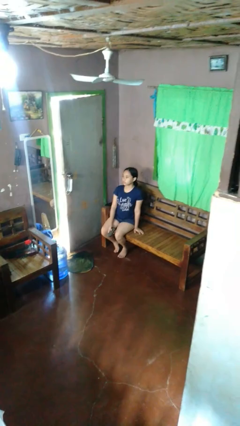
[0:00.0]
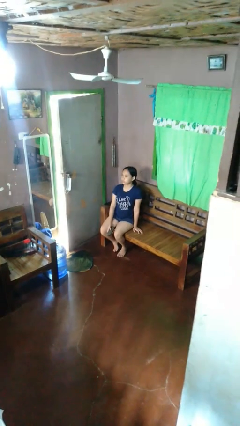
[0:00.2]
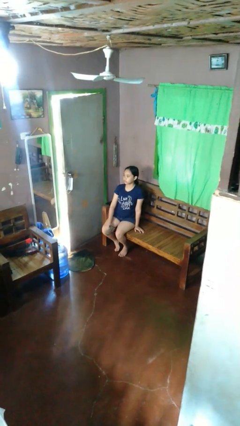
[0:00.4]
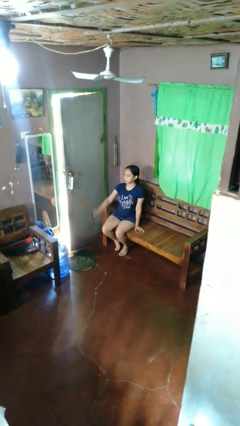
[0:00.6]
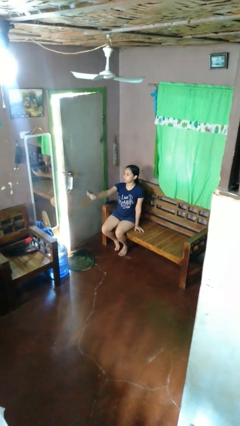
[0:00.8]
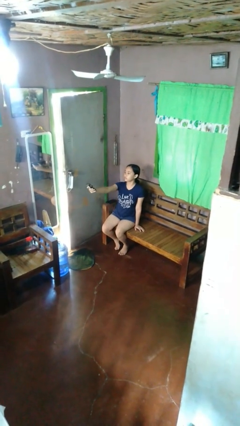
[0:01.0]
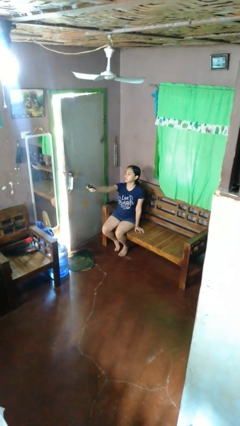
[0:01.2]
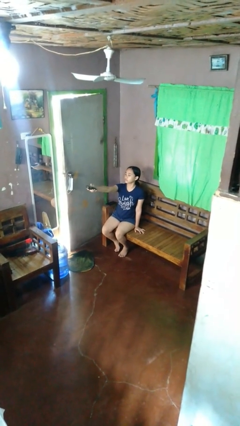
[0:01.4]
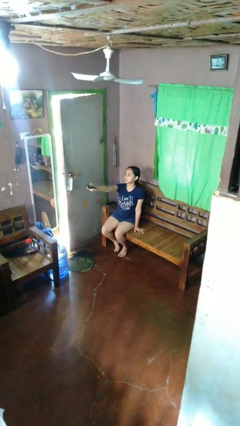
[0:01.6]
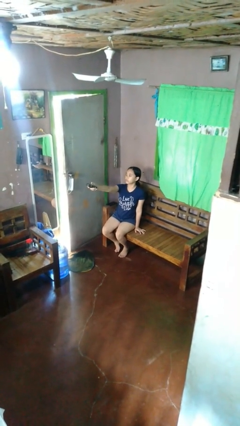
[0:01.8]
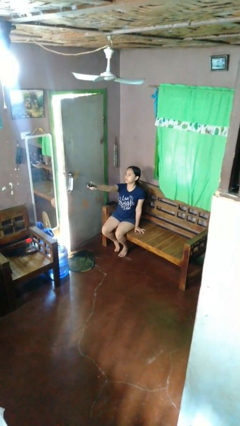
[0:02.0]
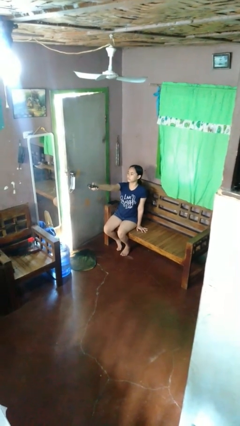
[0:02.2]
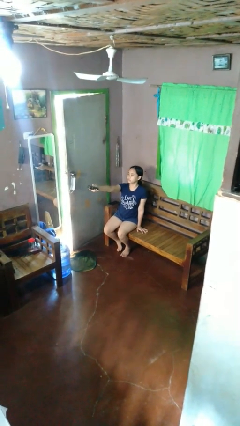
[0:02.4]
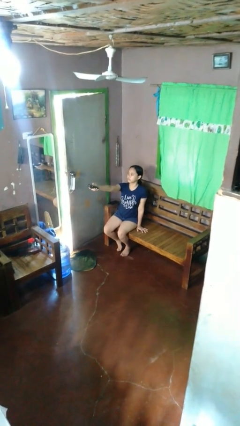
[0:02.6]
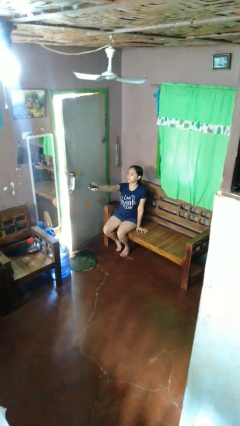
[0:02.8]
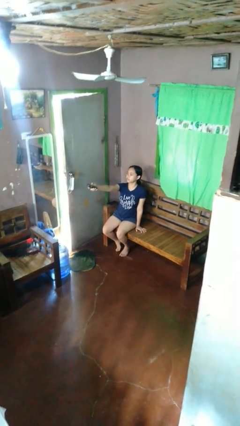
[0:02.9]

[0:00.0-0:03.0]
person uses television remote

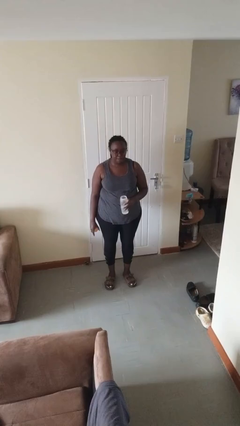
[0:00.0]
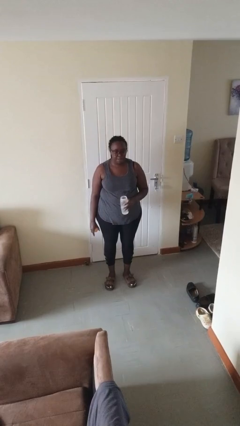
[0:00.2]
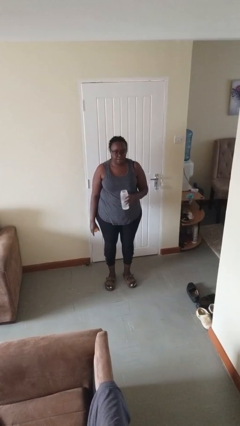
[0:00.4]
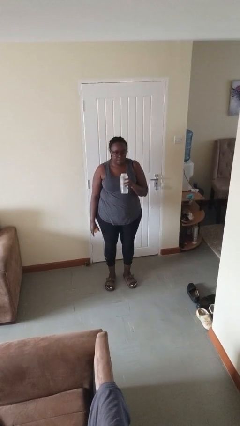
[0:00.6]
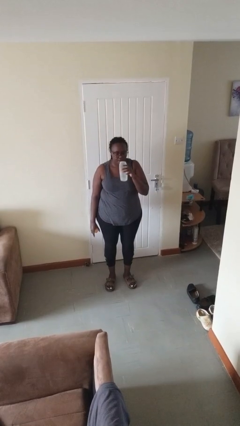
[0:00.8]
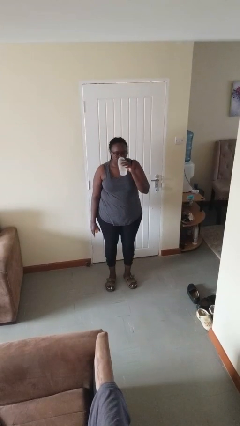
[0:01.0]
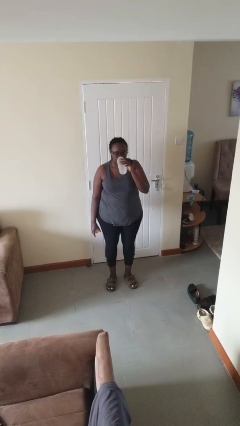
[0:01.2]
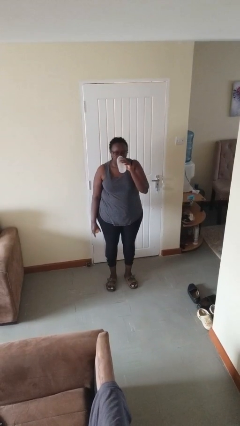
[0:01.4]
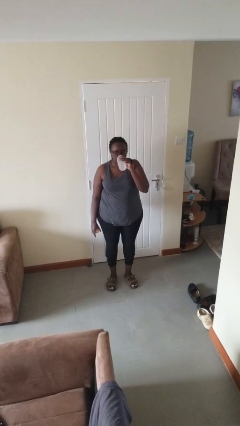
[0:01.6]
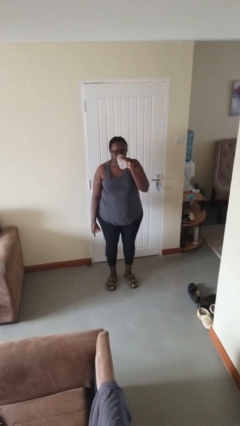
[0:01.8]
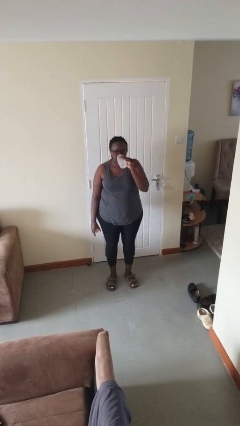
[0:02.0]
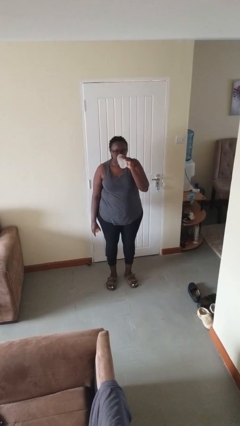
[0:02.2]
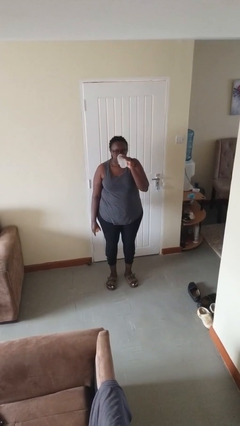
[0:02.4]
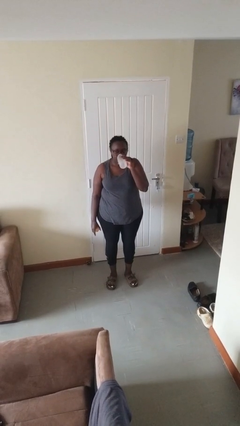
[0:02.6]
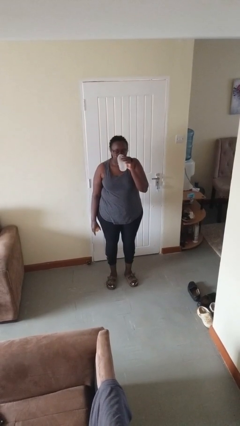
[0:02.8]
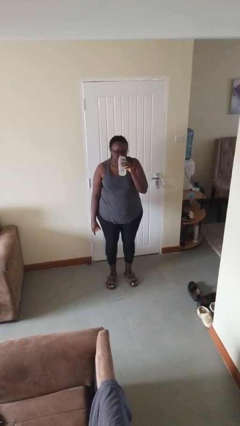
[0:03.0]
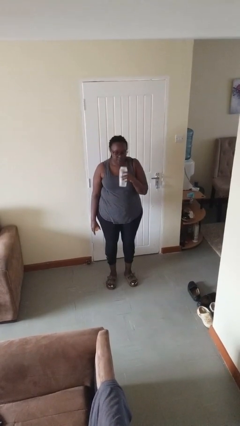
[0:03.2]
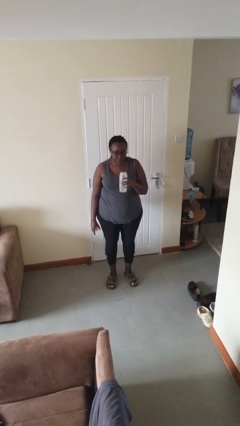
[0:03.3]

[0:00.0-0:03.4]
person drinks from bottle

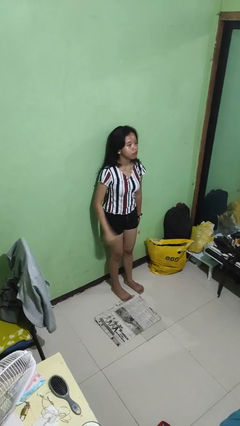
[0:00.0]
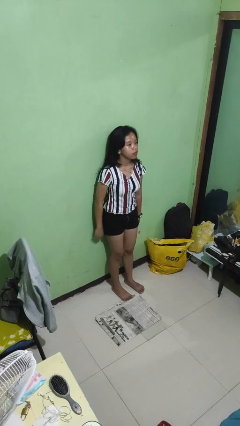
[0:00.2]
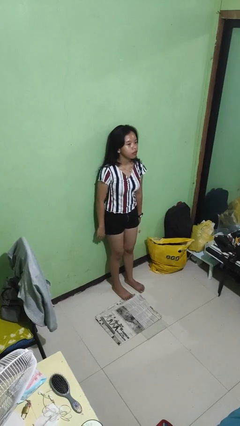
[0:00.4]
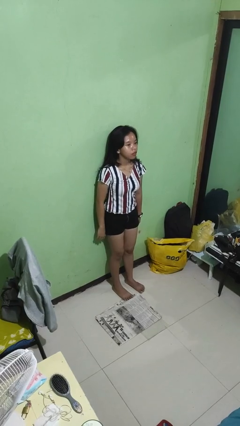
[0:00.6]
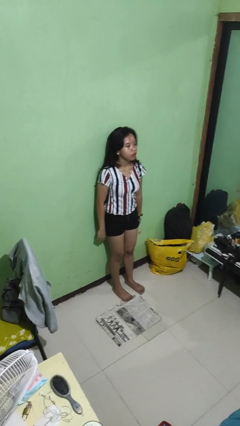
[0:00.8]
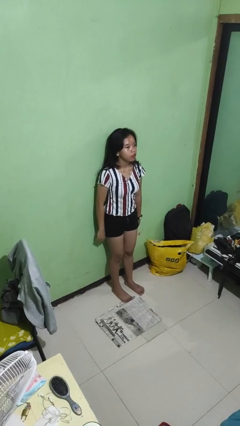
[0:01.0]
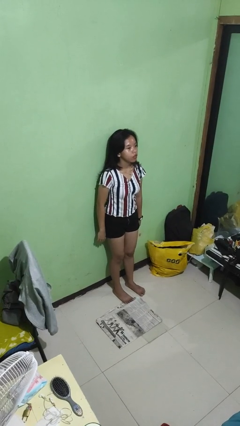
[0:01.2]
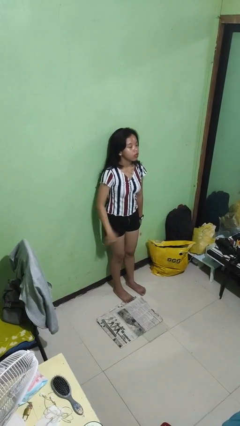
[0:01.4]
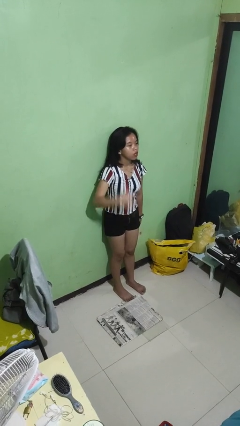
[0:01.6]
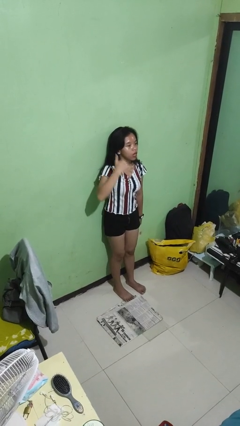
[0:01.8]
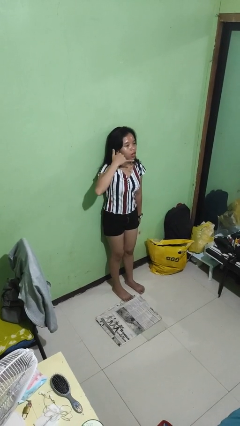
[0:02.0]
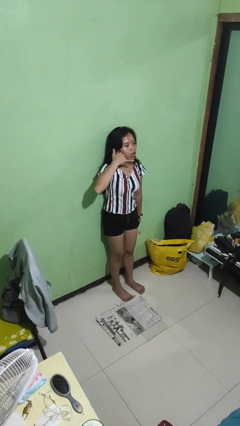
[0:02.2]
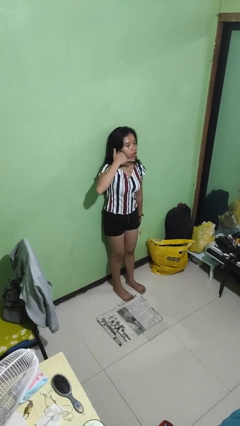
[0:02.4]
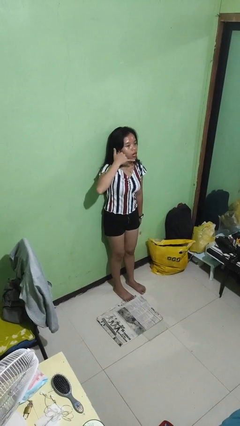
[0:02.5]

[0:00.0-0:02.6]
person picks up object from floor

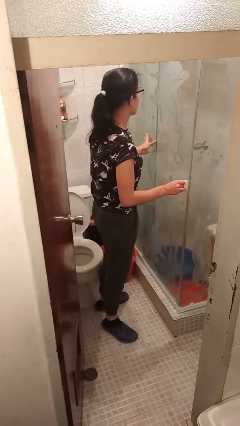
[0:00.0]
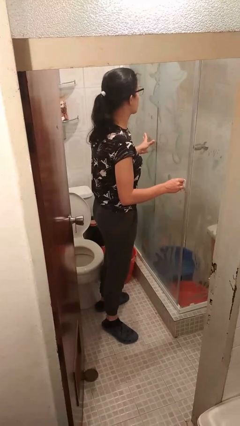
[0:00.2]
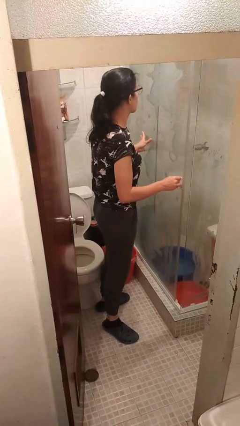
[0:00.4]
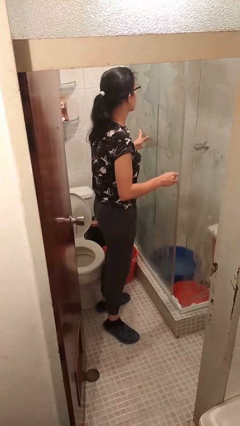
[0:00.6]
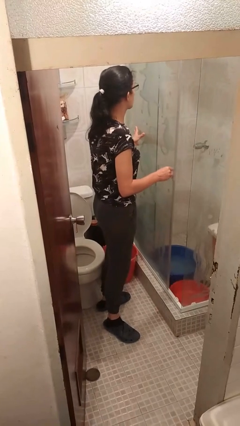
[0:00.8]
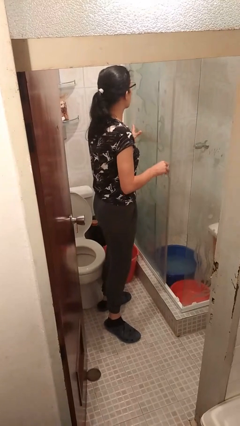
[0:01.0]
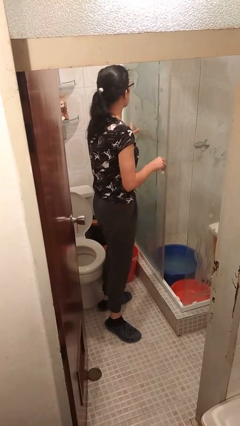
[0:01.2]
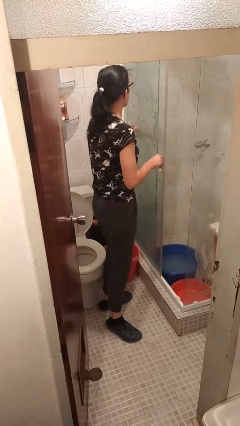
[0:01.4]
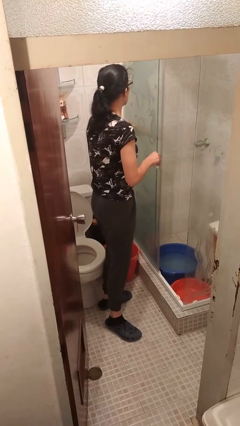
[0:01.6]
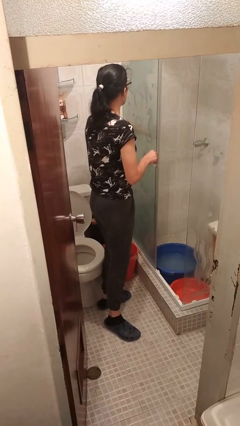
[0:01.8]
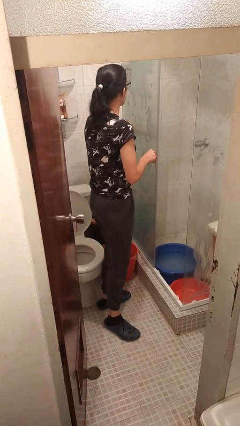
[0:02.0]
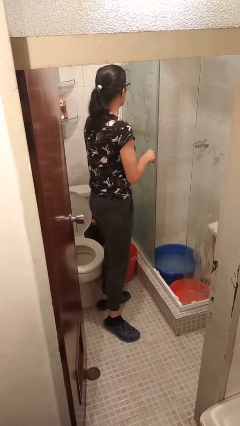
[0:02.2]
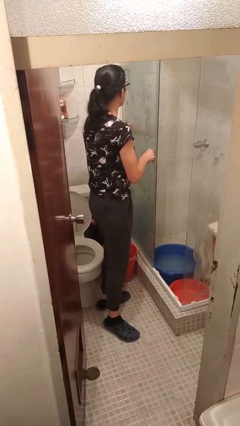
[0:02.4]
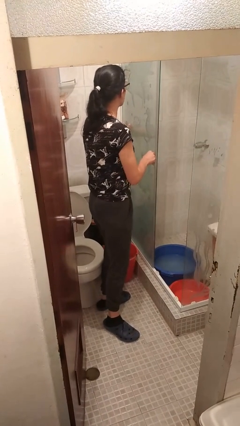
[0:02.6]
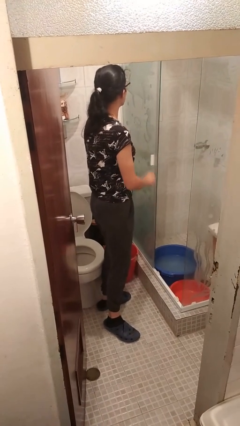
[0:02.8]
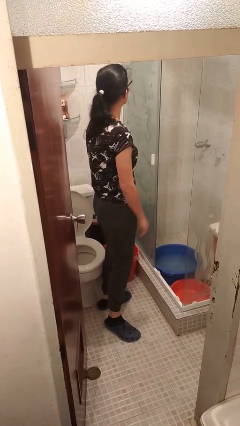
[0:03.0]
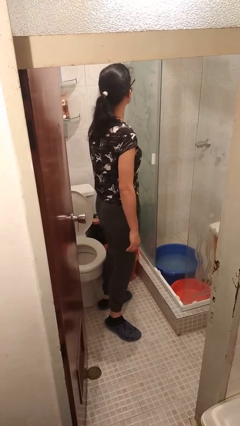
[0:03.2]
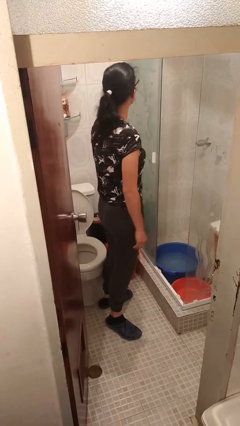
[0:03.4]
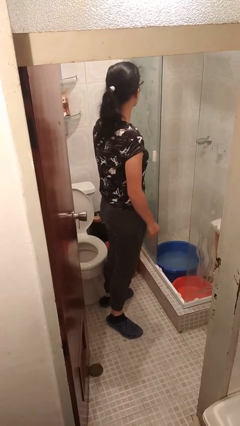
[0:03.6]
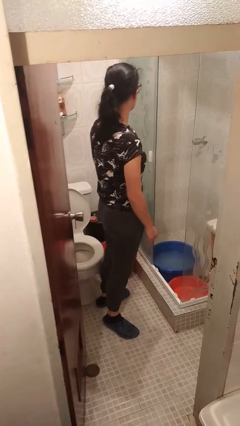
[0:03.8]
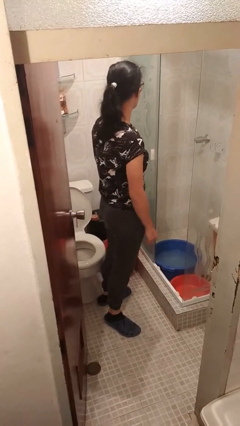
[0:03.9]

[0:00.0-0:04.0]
person opens sliding door

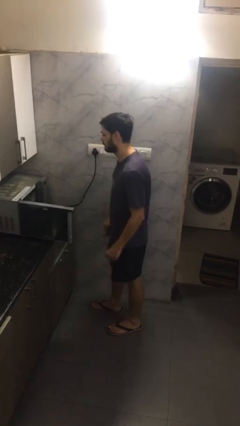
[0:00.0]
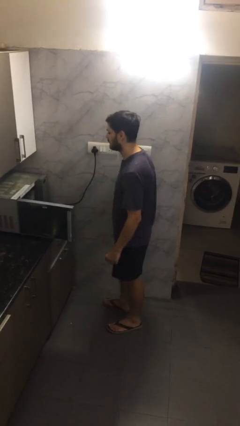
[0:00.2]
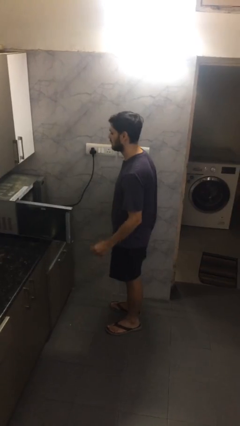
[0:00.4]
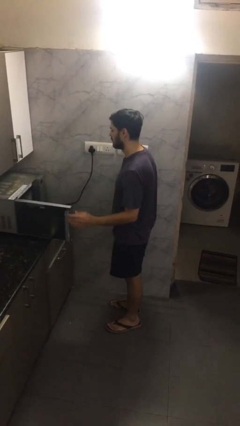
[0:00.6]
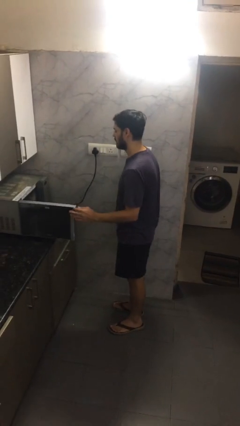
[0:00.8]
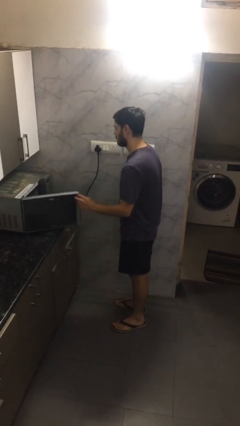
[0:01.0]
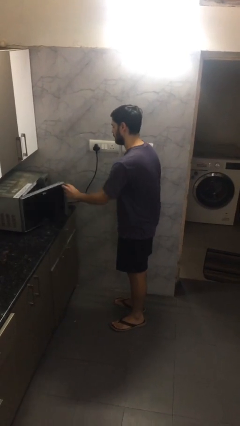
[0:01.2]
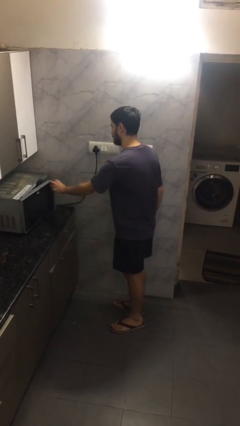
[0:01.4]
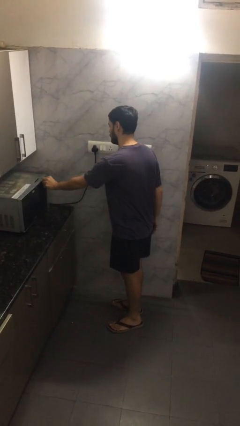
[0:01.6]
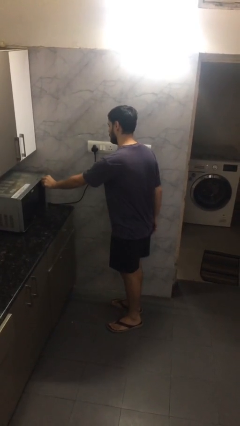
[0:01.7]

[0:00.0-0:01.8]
person closes microwave

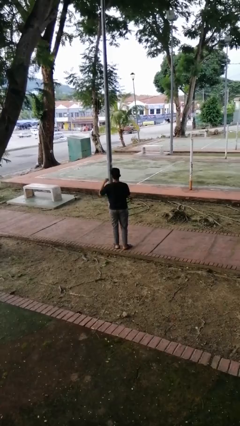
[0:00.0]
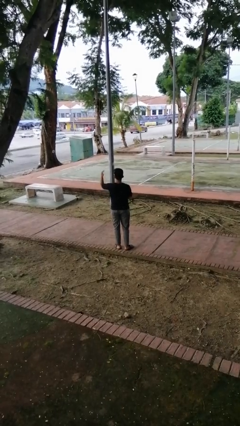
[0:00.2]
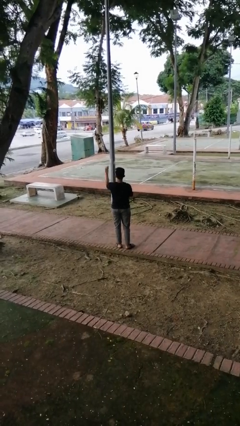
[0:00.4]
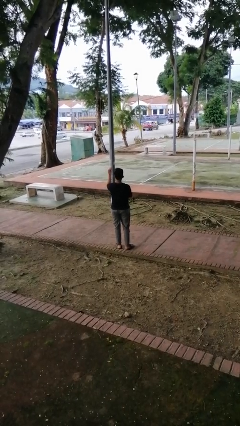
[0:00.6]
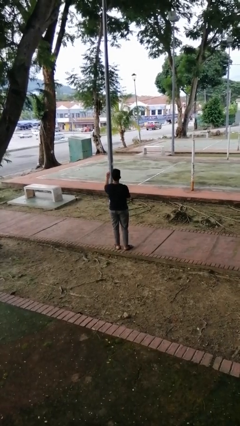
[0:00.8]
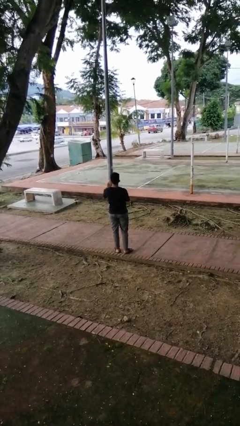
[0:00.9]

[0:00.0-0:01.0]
person karate chop

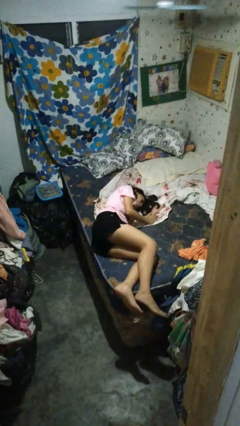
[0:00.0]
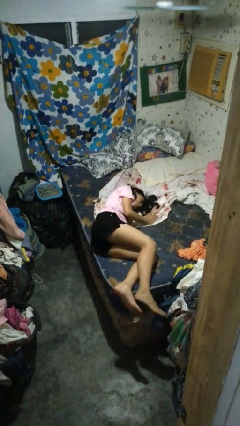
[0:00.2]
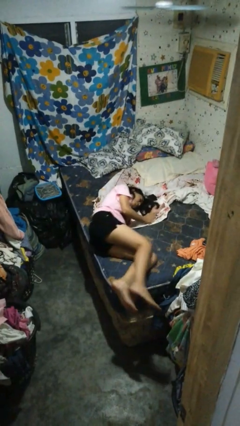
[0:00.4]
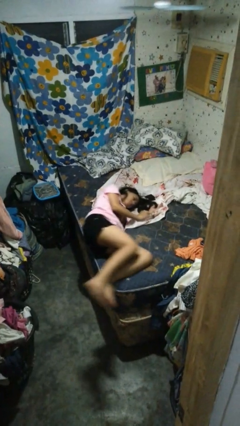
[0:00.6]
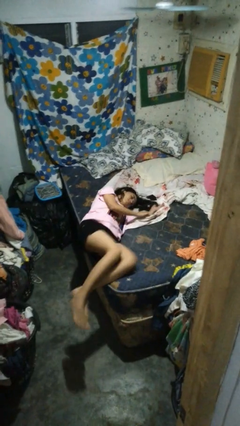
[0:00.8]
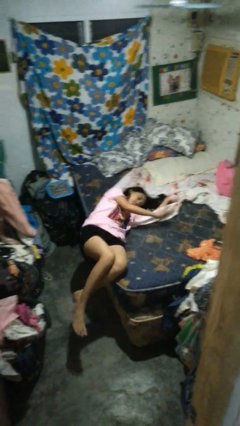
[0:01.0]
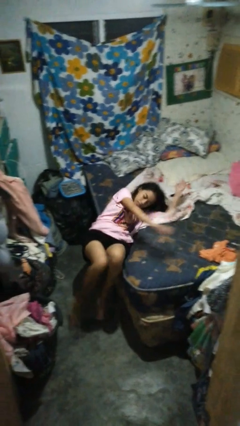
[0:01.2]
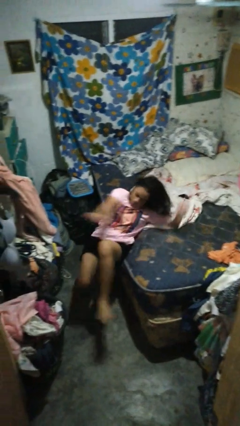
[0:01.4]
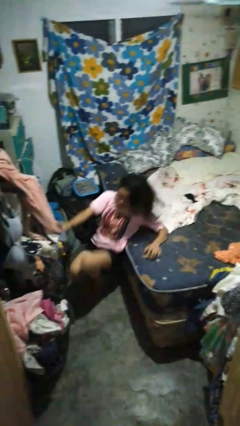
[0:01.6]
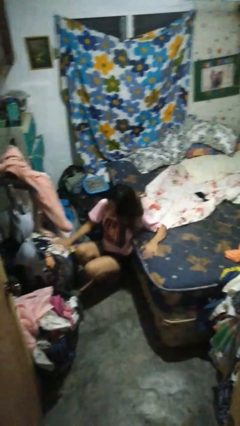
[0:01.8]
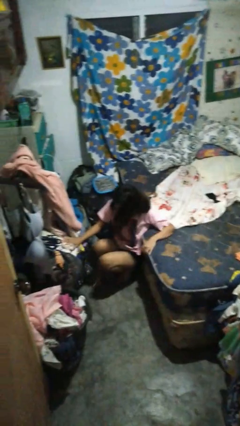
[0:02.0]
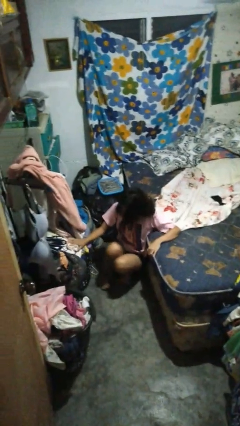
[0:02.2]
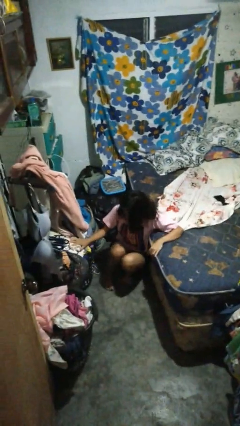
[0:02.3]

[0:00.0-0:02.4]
person falls from bed
